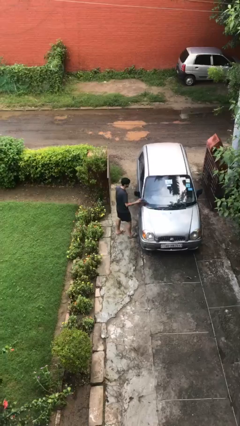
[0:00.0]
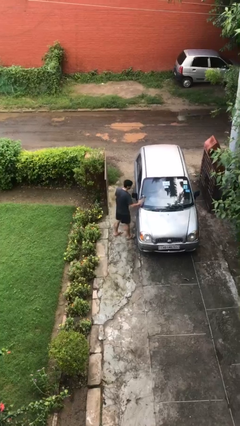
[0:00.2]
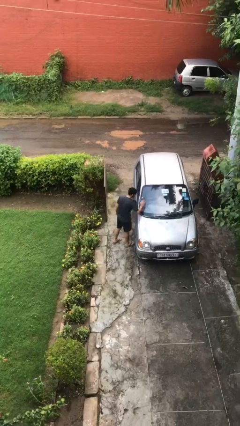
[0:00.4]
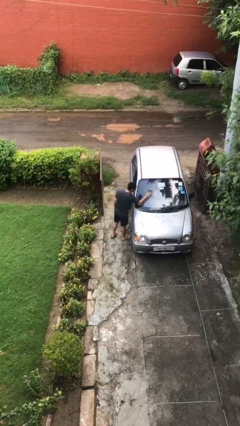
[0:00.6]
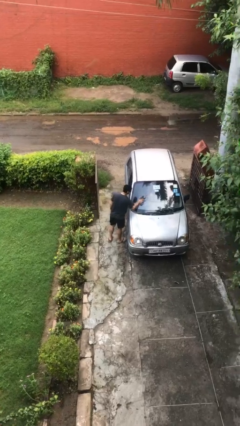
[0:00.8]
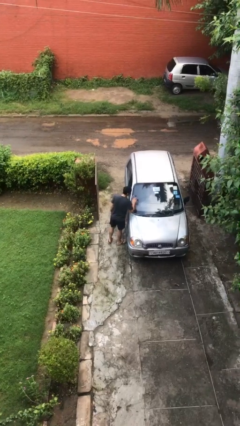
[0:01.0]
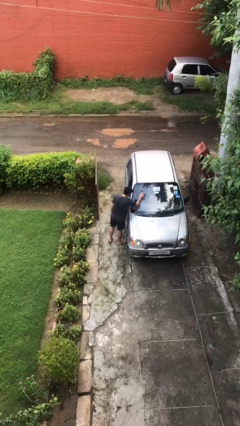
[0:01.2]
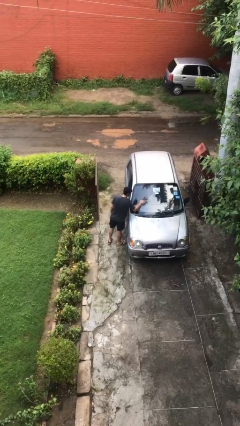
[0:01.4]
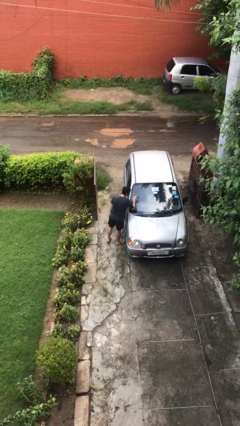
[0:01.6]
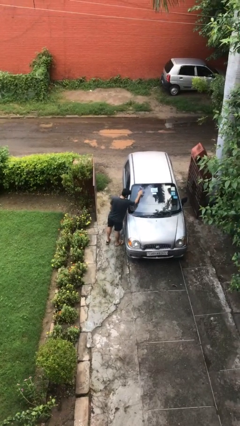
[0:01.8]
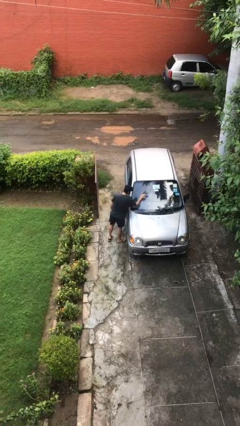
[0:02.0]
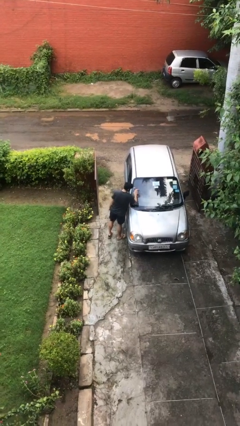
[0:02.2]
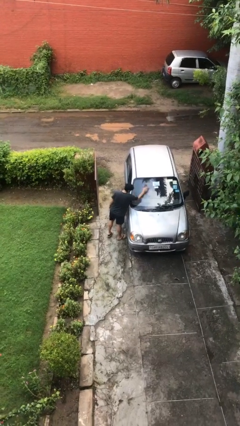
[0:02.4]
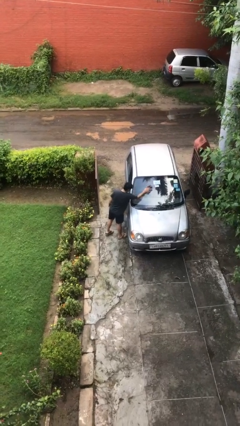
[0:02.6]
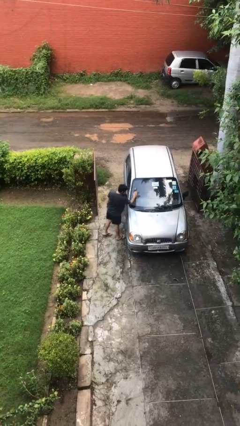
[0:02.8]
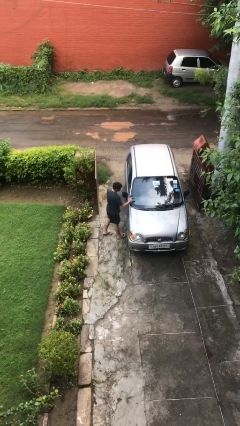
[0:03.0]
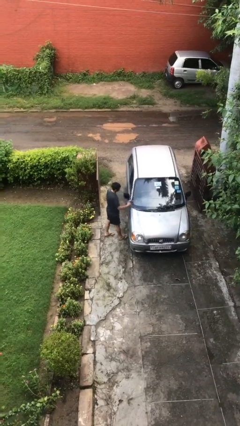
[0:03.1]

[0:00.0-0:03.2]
person polishes car with rag

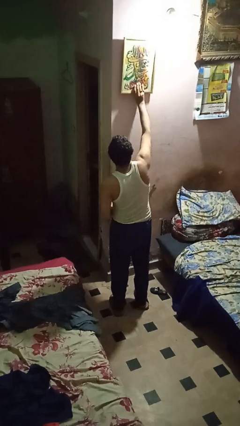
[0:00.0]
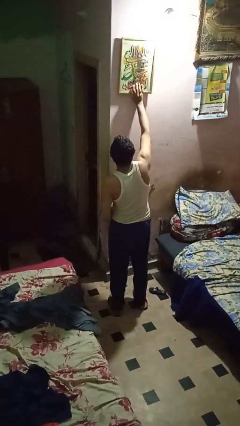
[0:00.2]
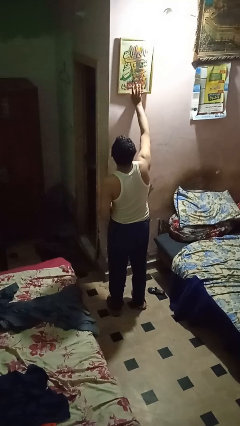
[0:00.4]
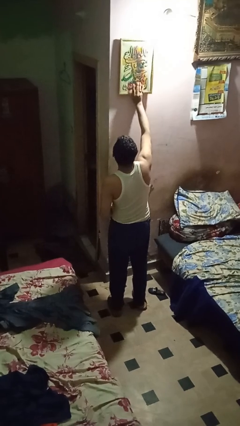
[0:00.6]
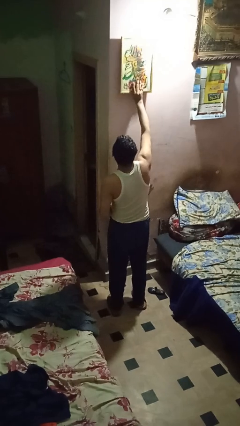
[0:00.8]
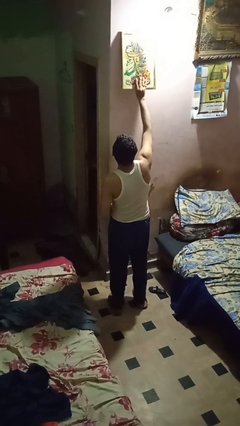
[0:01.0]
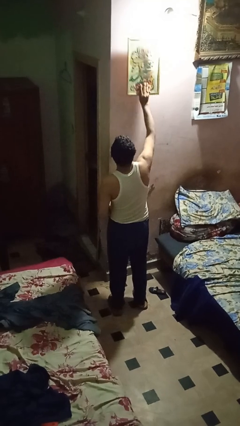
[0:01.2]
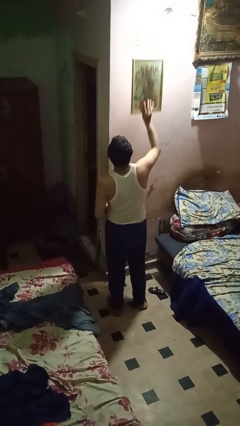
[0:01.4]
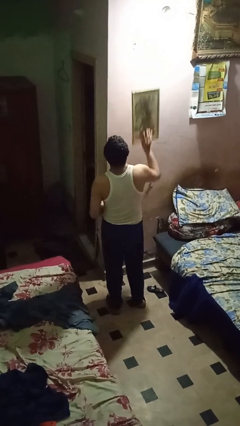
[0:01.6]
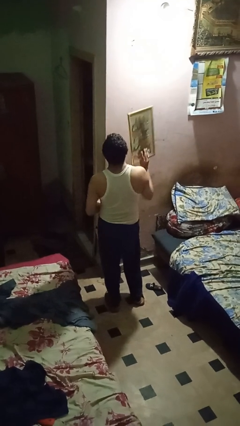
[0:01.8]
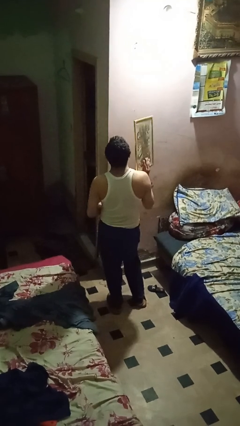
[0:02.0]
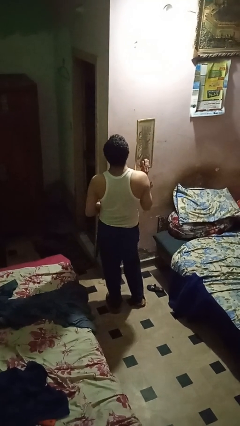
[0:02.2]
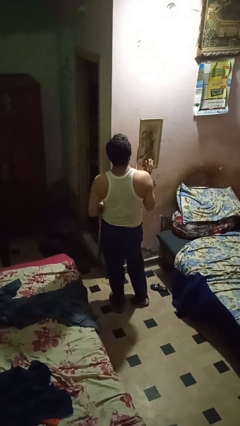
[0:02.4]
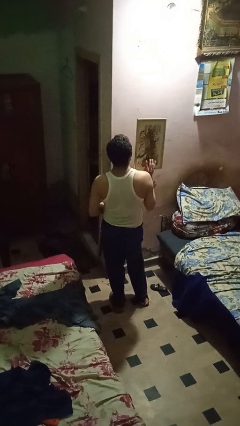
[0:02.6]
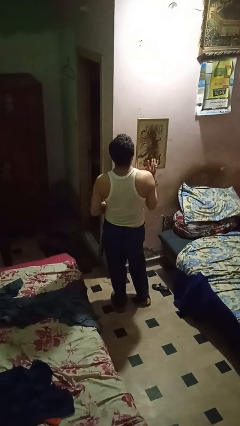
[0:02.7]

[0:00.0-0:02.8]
person takes down picture frame

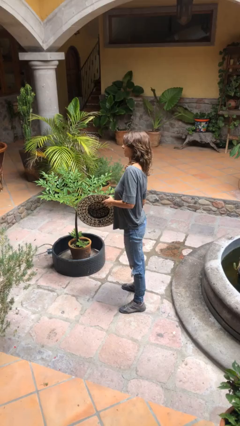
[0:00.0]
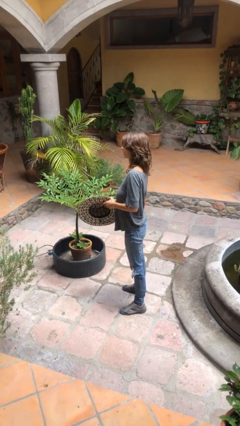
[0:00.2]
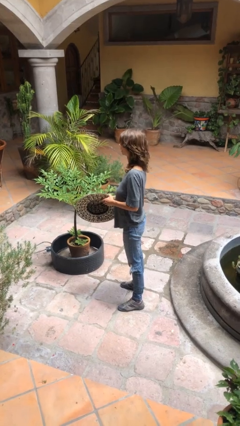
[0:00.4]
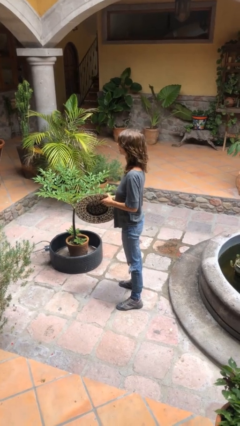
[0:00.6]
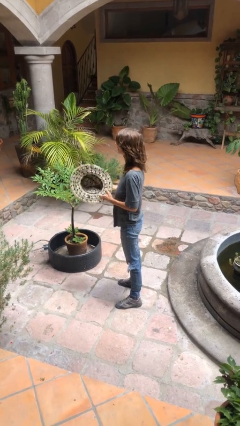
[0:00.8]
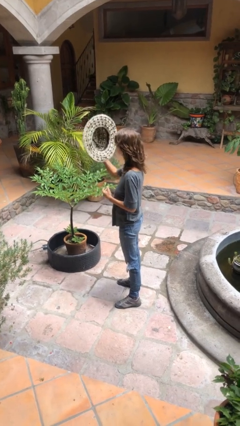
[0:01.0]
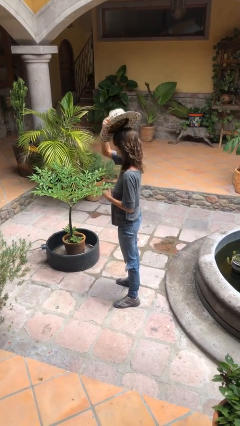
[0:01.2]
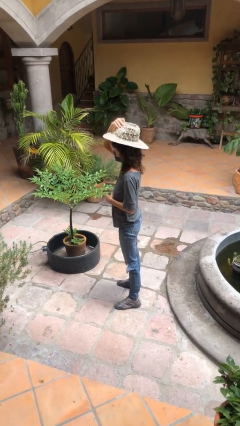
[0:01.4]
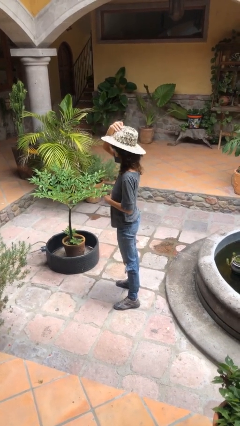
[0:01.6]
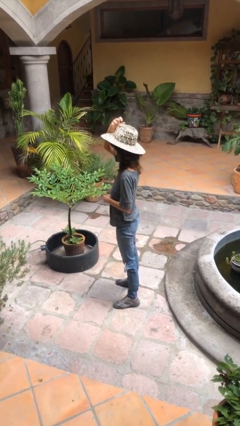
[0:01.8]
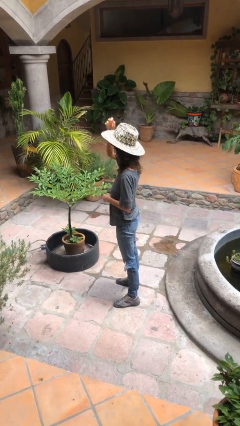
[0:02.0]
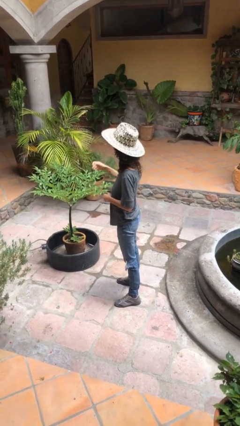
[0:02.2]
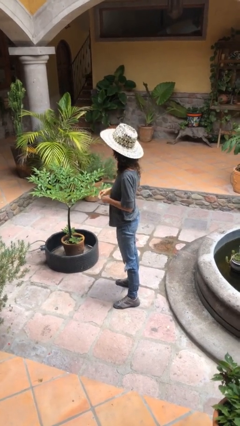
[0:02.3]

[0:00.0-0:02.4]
person puts on hat

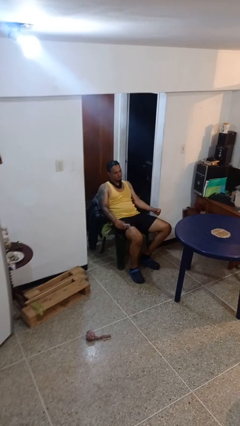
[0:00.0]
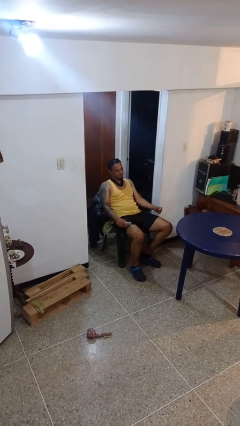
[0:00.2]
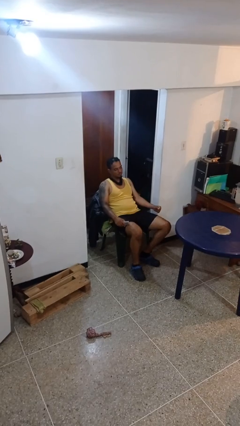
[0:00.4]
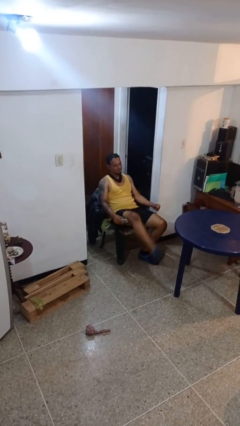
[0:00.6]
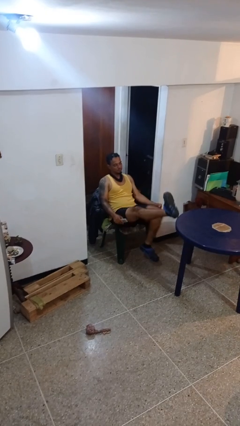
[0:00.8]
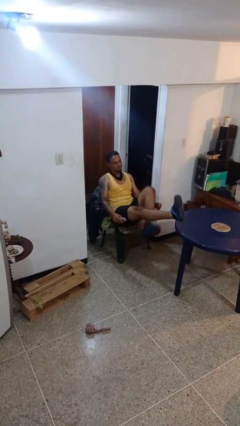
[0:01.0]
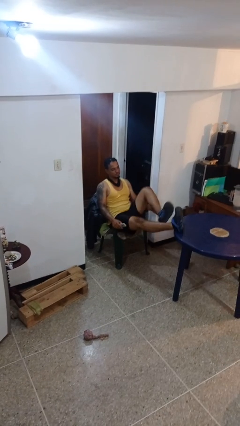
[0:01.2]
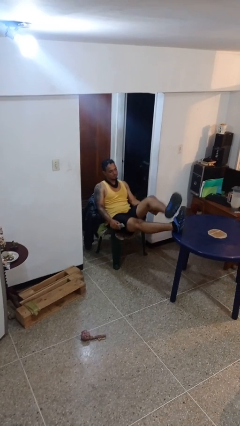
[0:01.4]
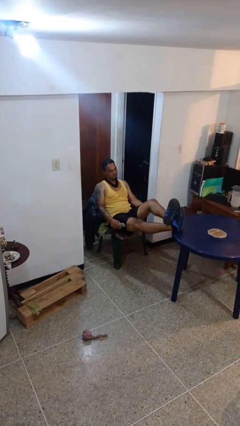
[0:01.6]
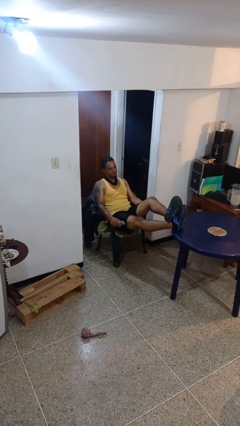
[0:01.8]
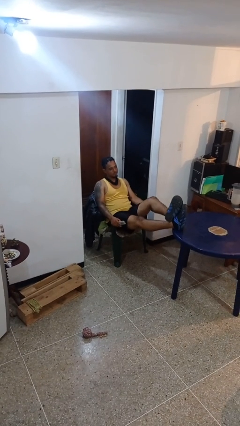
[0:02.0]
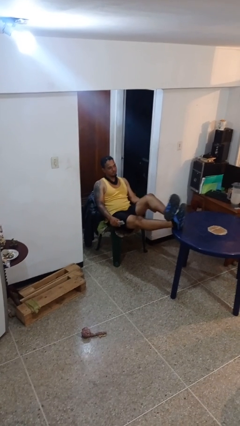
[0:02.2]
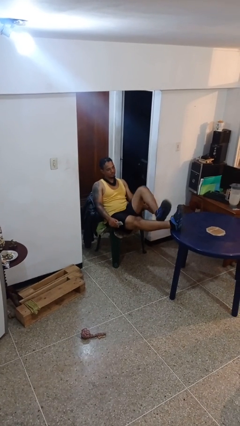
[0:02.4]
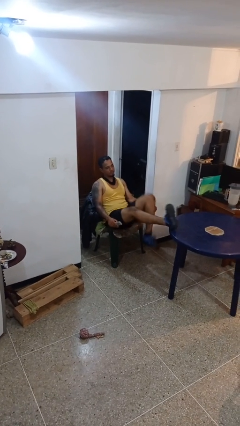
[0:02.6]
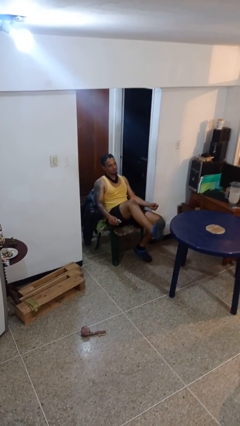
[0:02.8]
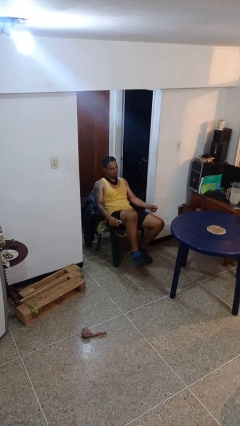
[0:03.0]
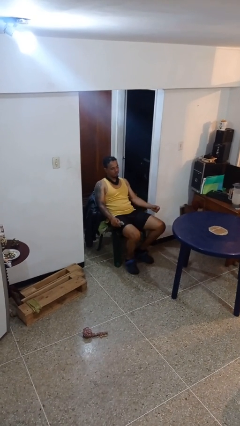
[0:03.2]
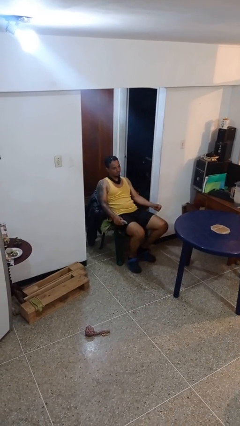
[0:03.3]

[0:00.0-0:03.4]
person puts feet up

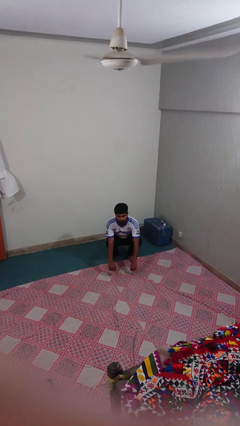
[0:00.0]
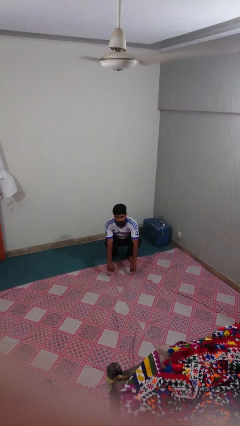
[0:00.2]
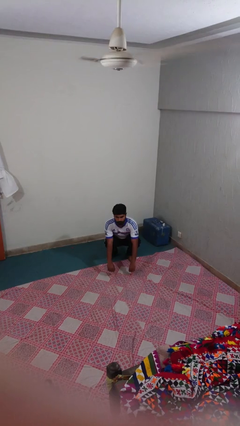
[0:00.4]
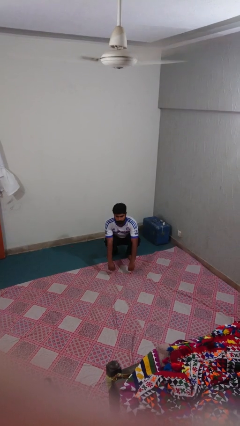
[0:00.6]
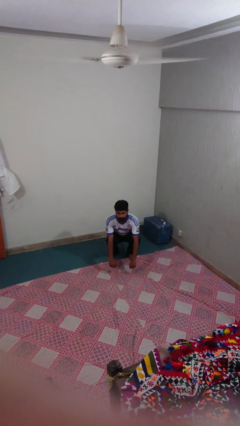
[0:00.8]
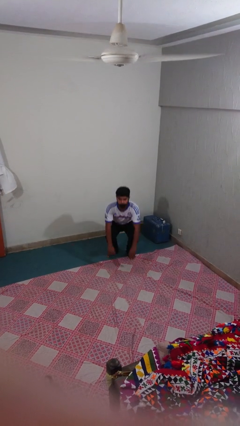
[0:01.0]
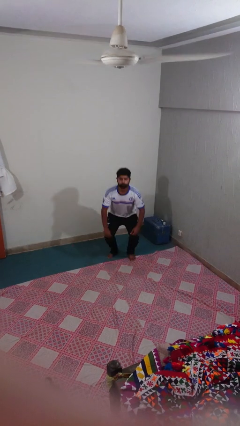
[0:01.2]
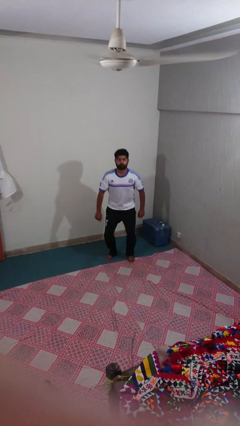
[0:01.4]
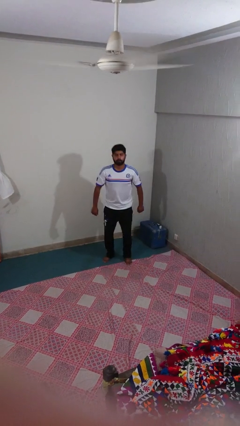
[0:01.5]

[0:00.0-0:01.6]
person stands up

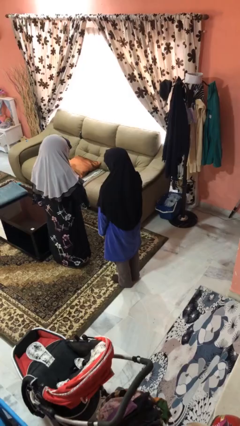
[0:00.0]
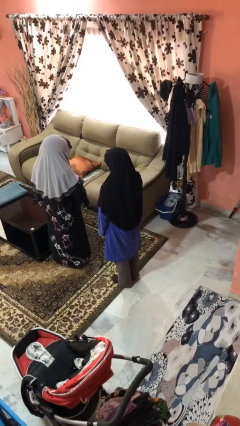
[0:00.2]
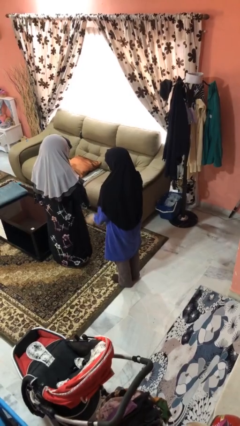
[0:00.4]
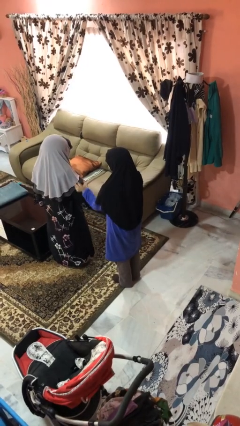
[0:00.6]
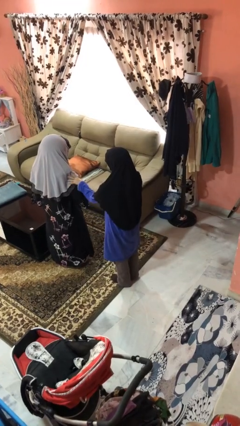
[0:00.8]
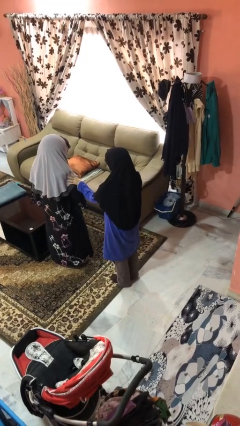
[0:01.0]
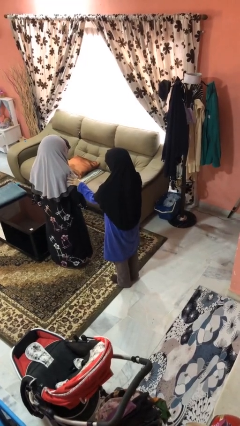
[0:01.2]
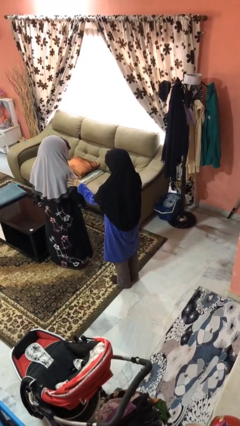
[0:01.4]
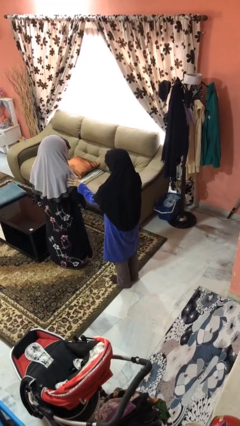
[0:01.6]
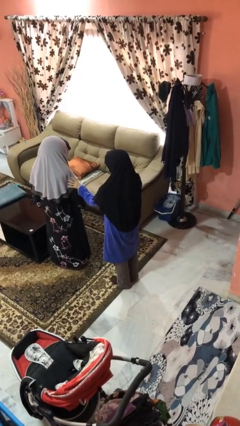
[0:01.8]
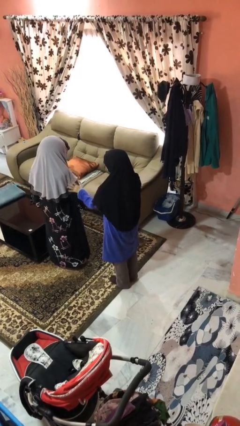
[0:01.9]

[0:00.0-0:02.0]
person grabs person by bicep

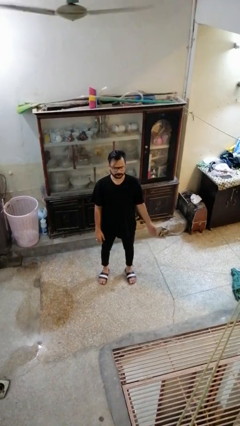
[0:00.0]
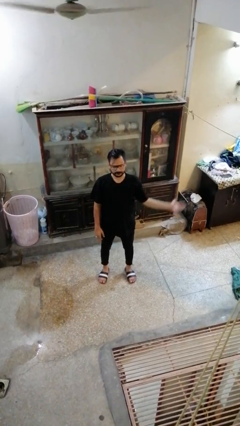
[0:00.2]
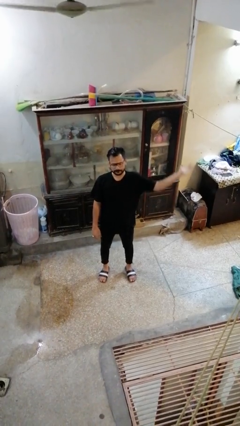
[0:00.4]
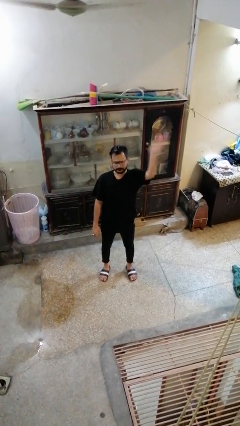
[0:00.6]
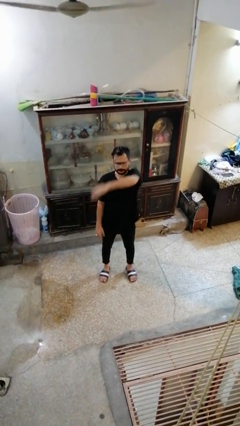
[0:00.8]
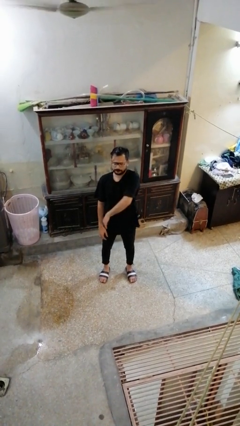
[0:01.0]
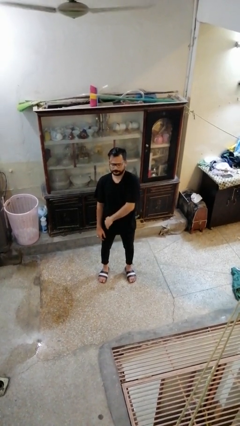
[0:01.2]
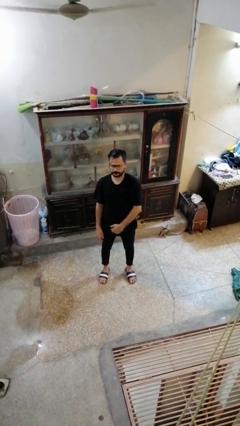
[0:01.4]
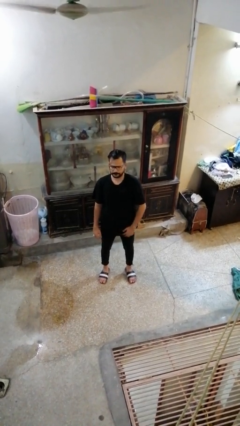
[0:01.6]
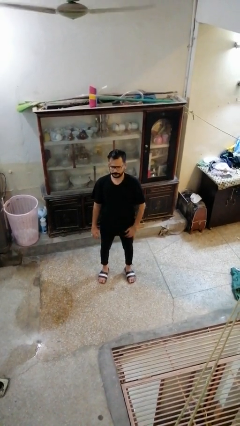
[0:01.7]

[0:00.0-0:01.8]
person gestures swipe right
